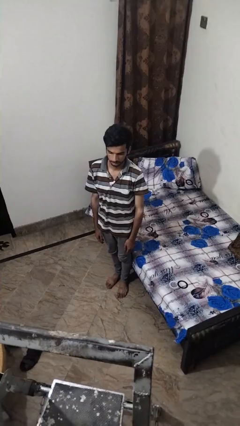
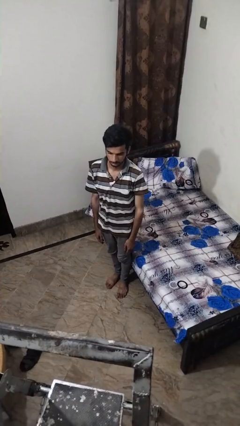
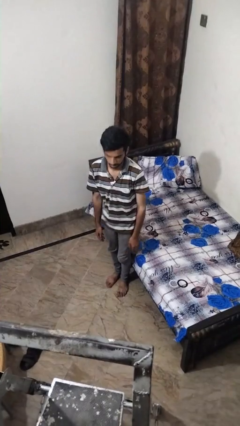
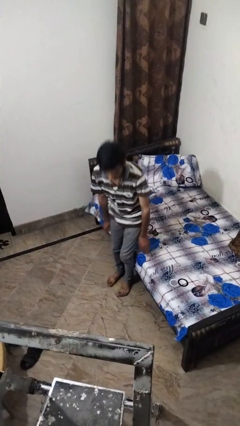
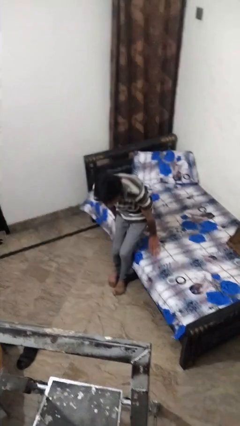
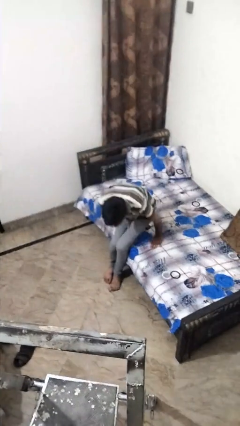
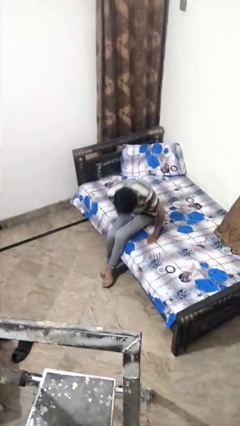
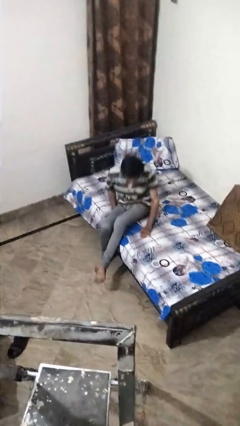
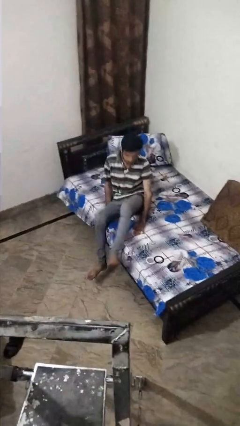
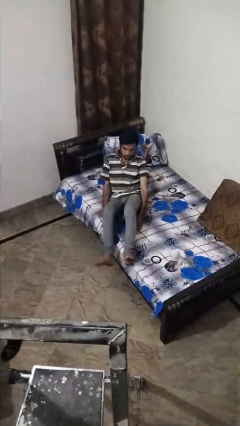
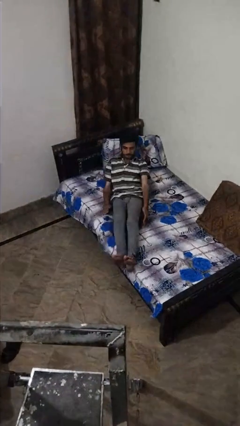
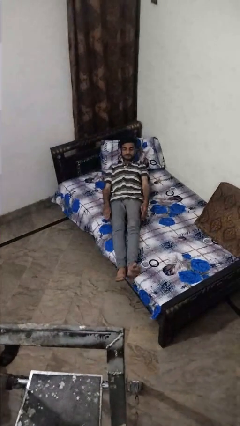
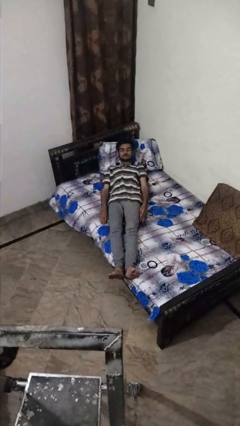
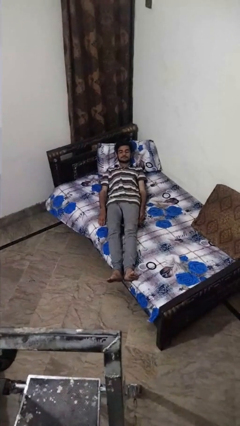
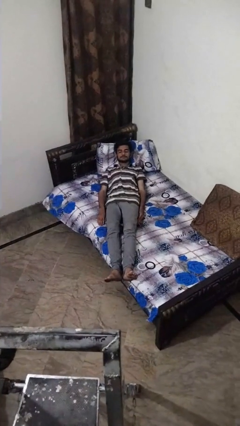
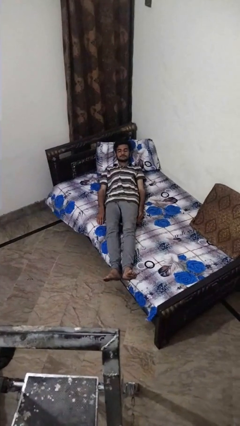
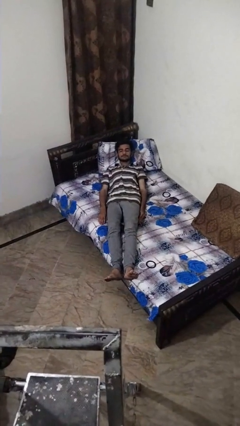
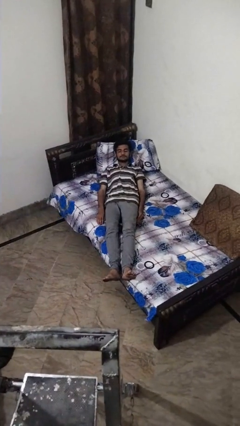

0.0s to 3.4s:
person lies down on bed

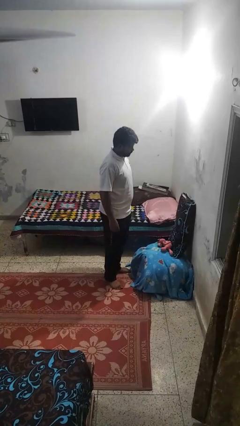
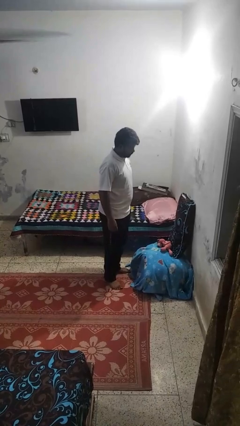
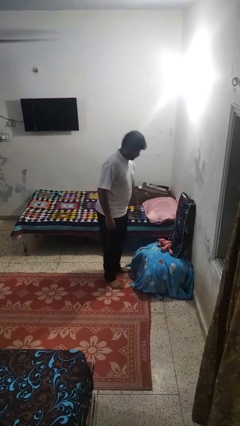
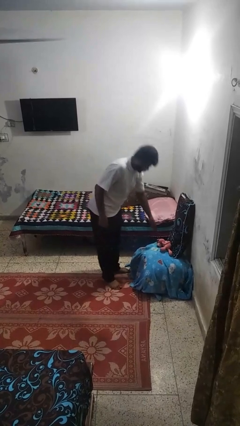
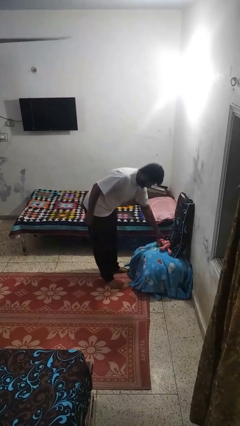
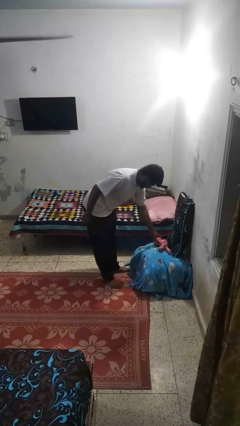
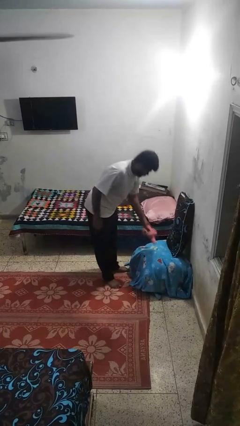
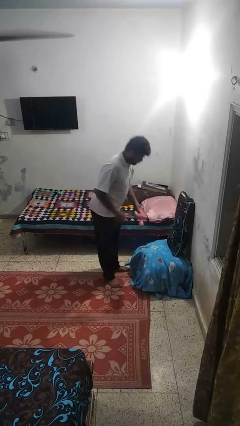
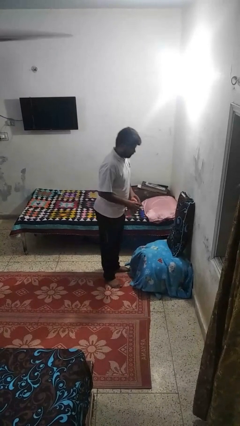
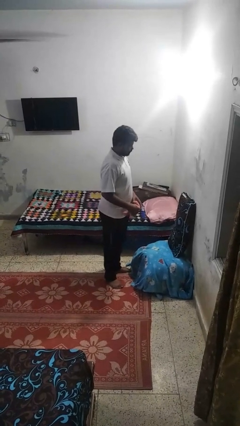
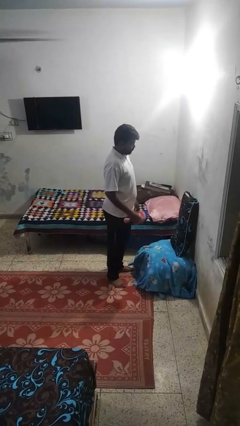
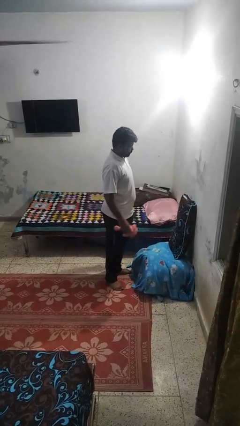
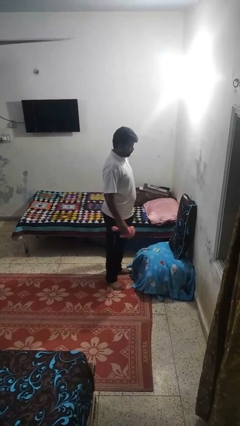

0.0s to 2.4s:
person picks up object from couch

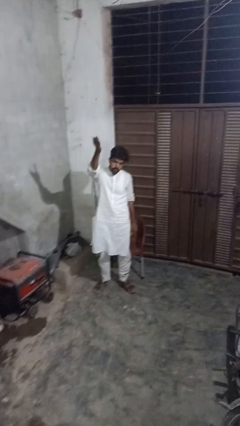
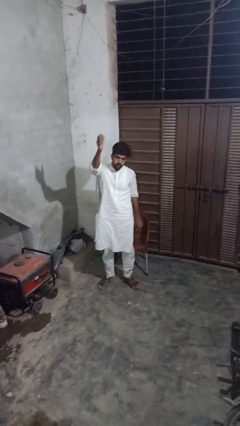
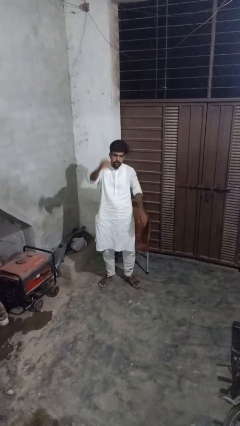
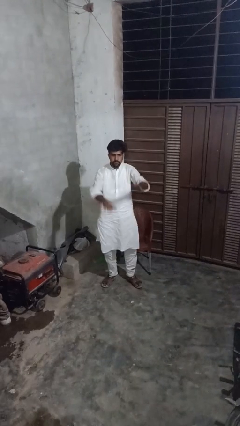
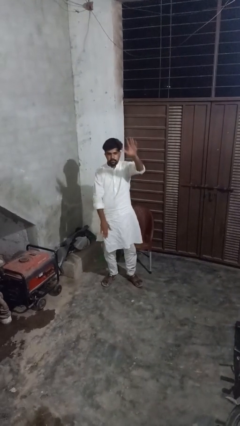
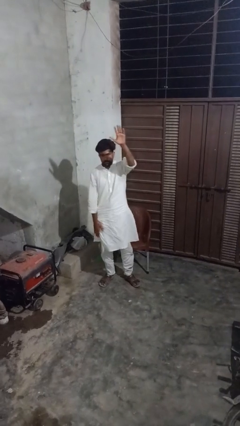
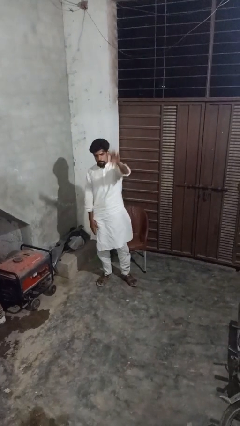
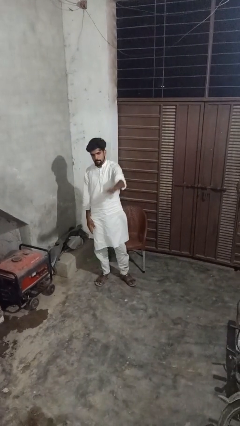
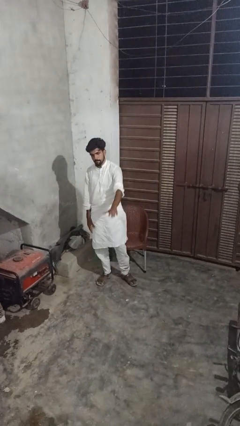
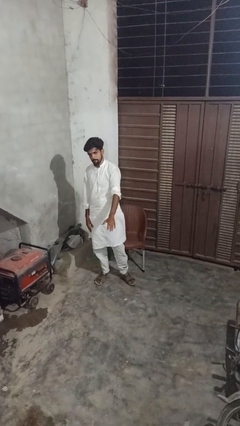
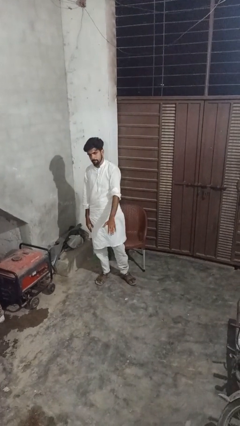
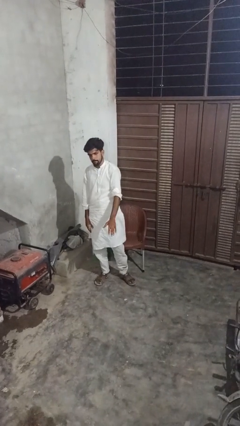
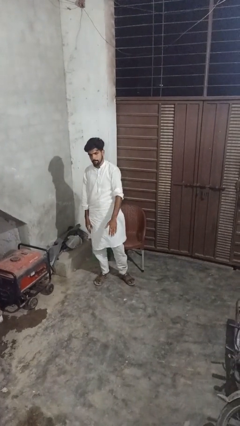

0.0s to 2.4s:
person gestures swipe down

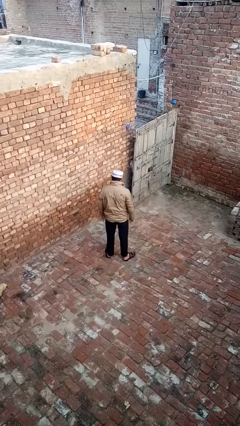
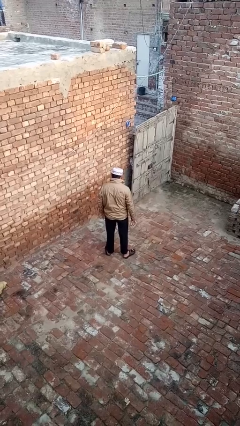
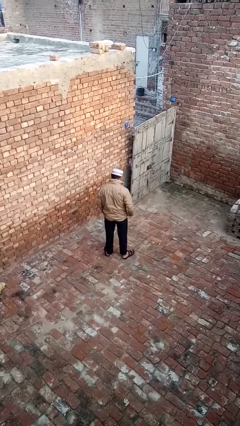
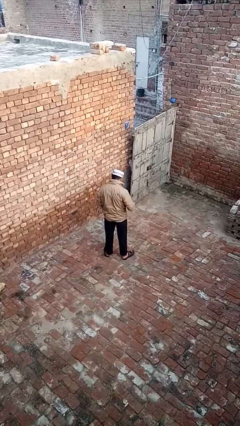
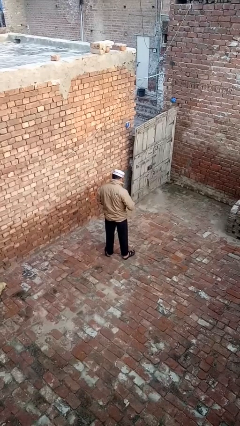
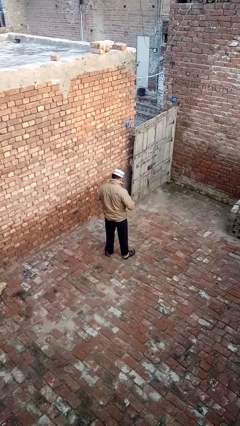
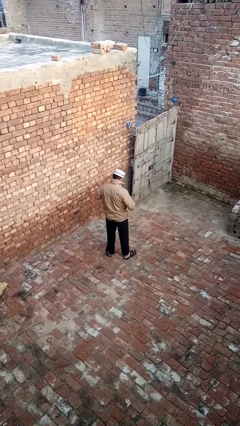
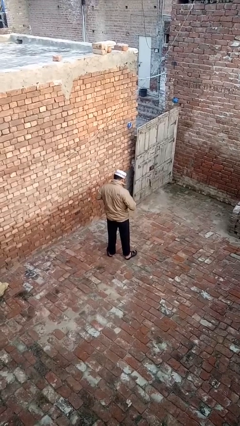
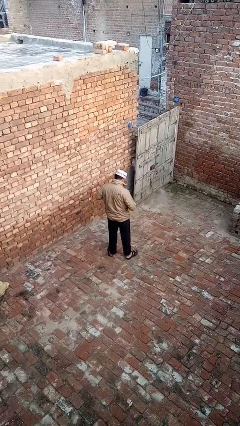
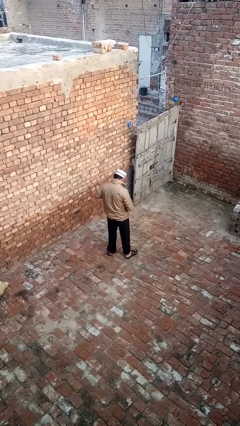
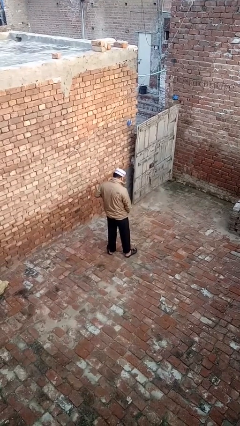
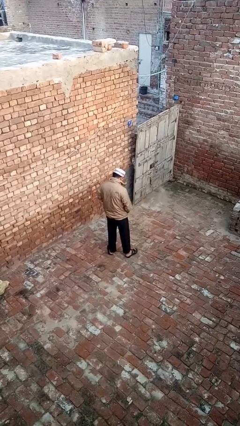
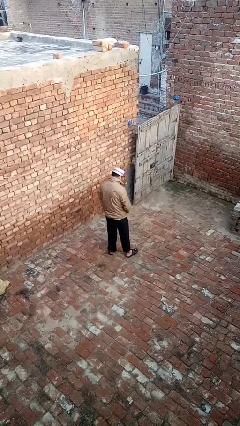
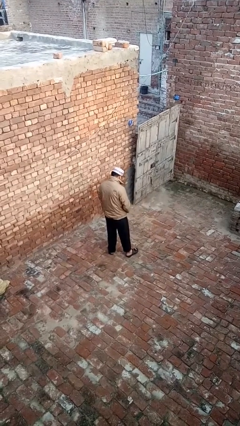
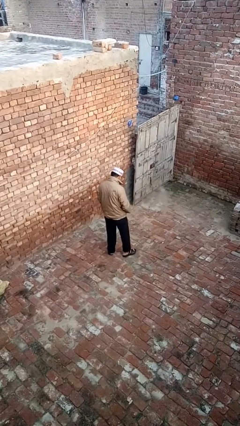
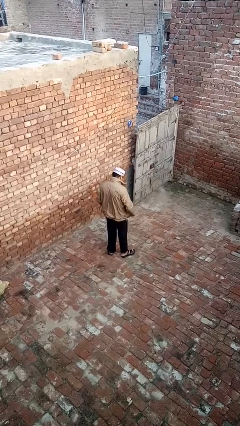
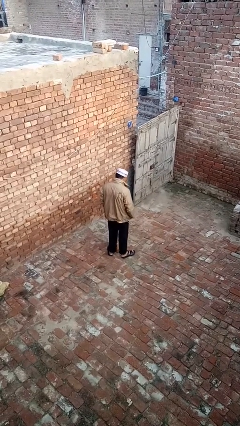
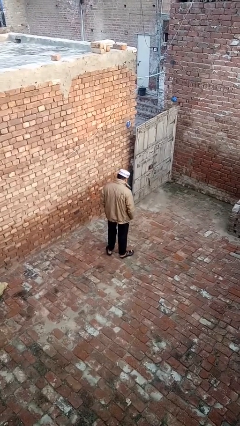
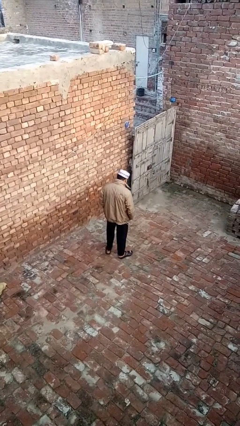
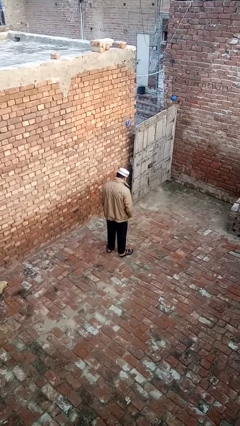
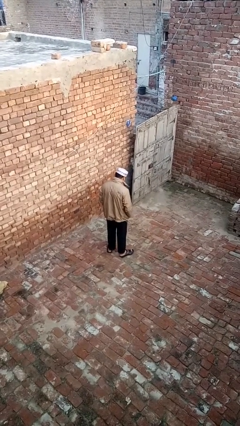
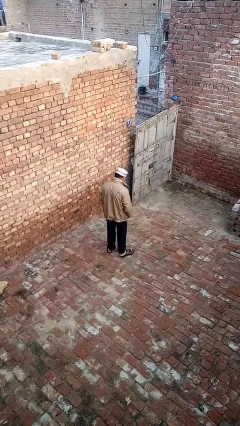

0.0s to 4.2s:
person unzips jacket

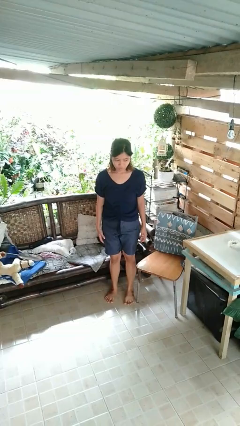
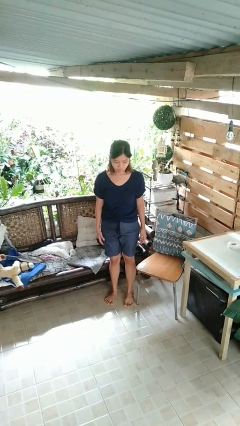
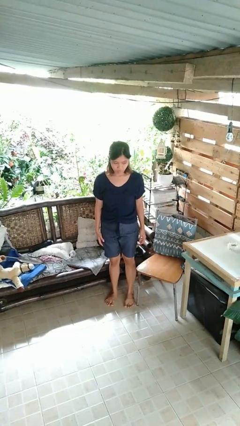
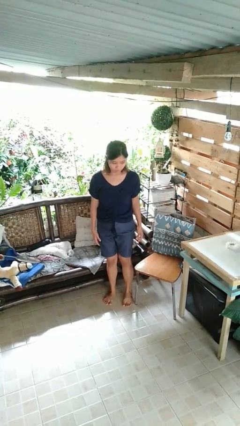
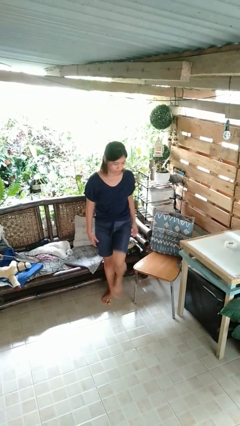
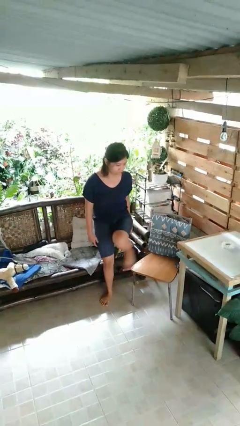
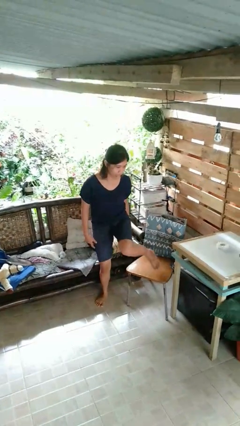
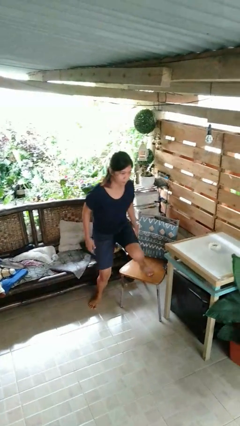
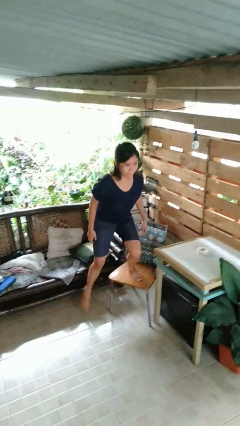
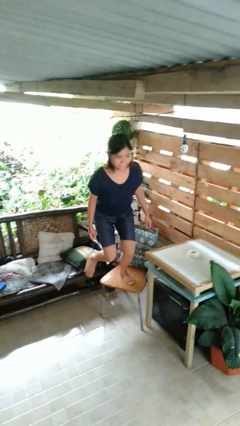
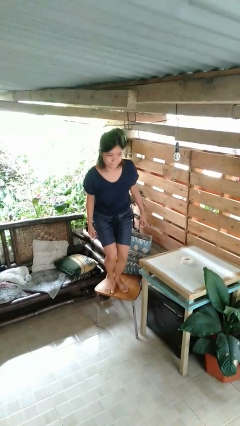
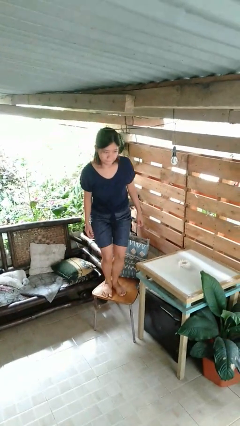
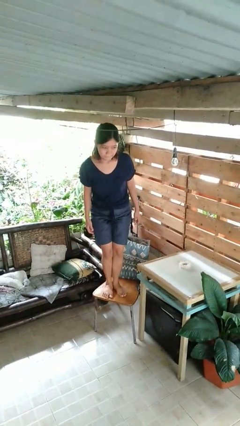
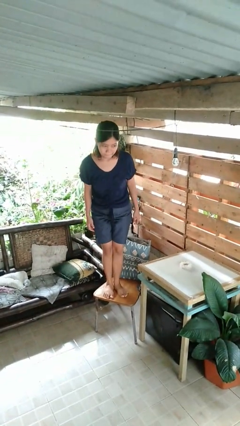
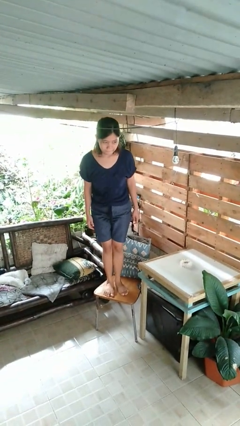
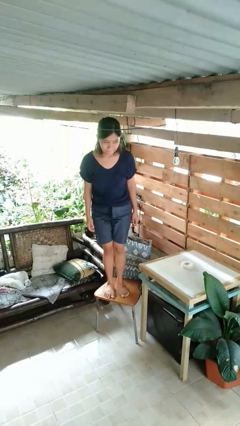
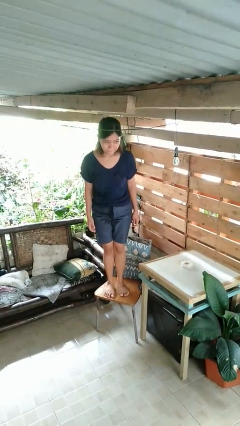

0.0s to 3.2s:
person climbs on chair

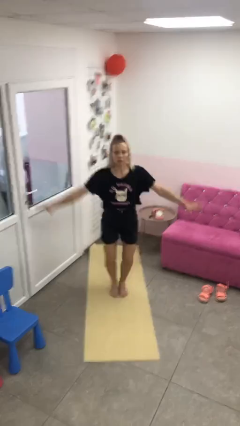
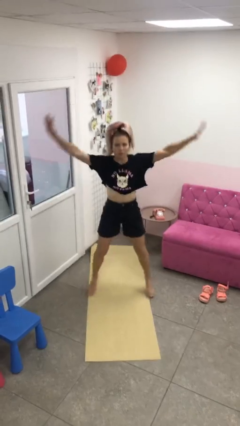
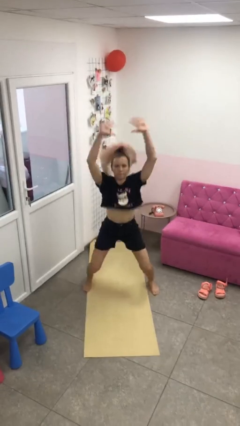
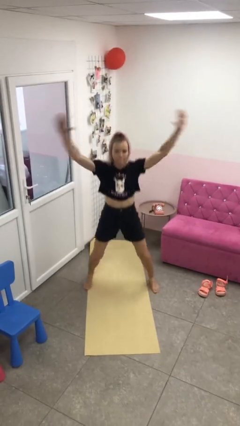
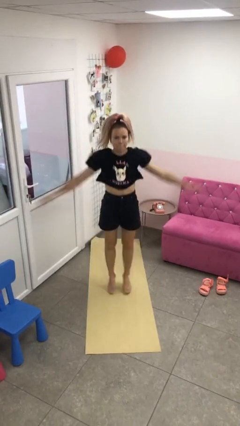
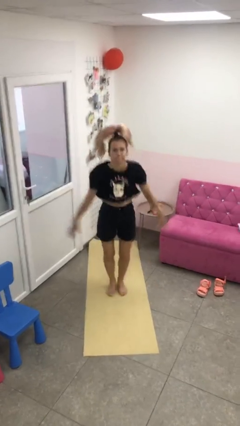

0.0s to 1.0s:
person exercises with jumping jacks

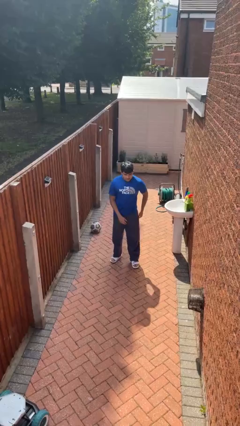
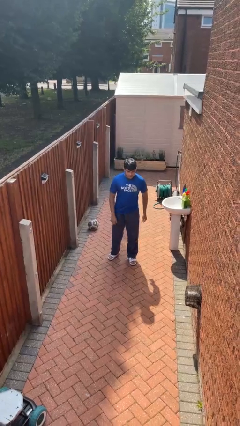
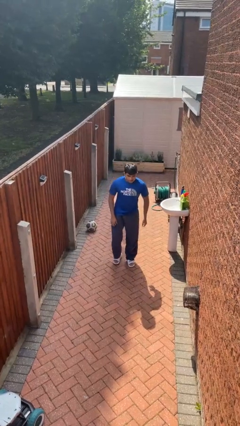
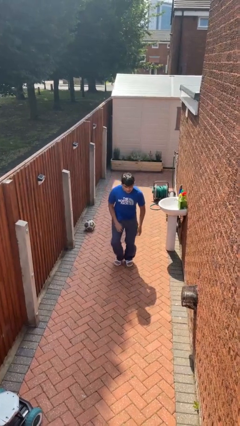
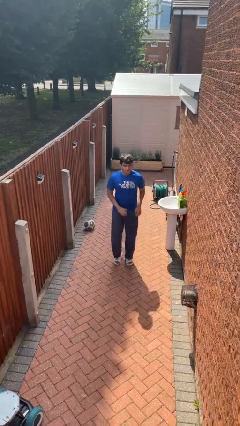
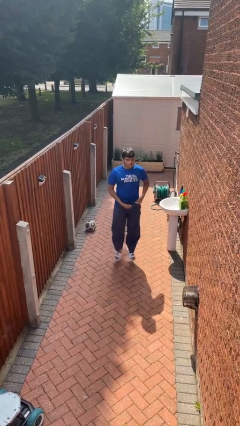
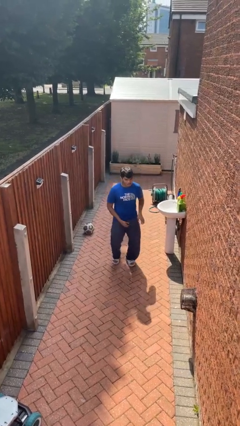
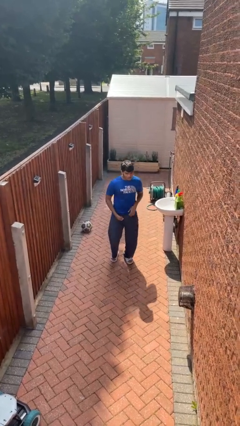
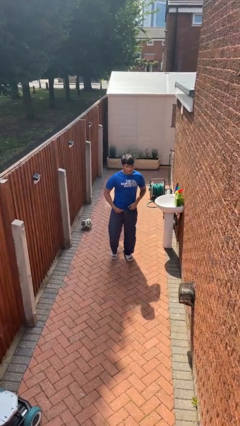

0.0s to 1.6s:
person jumps
